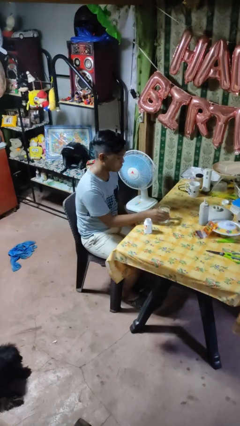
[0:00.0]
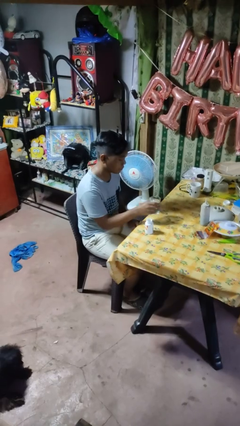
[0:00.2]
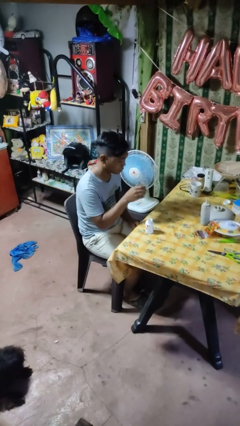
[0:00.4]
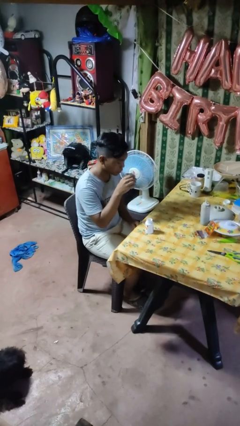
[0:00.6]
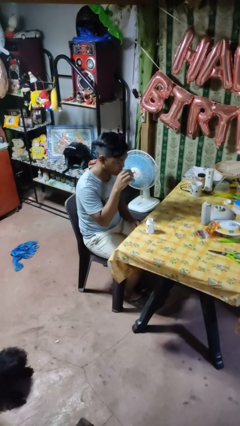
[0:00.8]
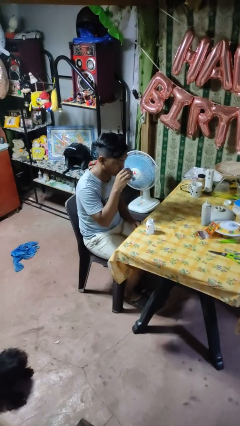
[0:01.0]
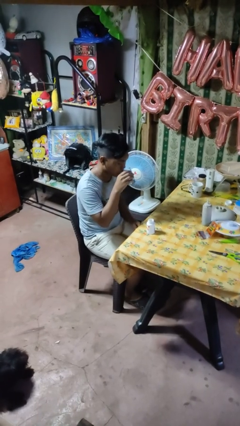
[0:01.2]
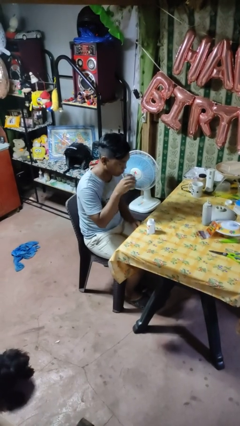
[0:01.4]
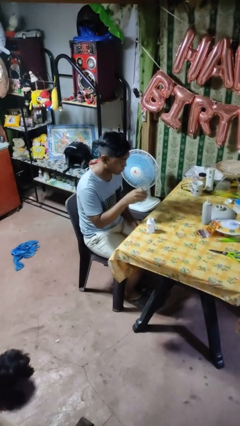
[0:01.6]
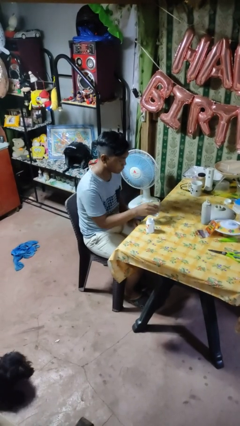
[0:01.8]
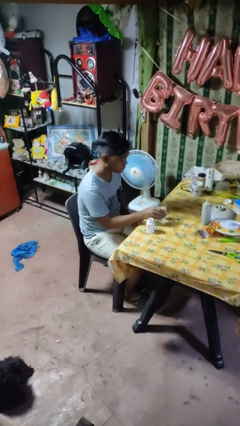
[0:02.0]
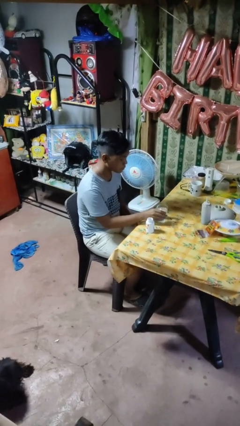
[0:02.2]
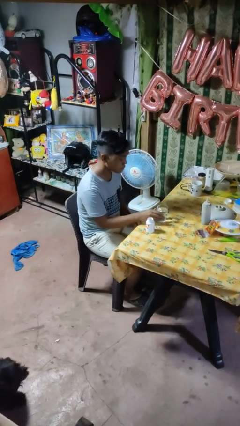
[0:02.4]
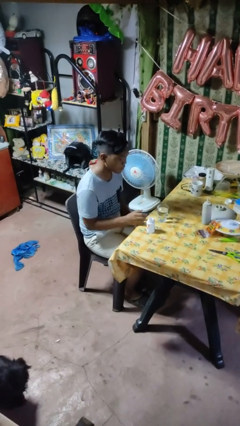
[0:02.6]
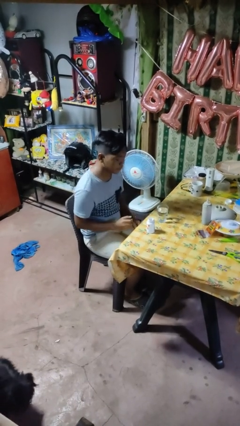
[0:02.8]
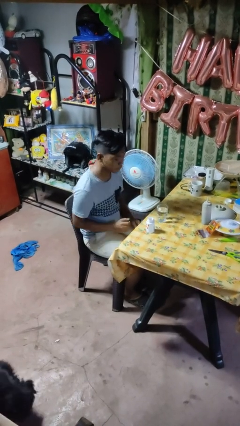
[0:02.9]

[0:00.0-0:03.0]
person drinks from cup

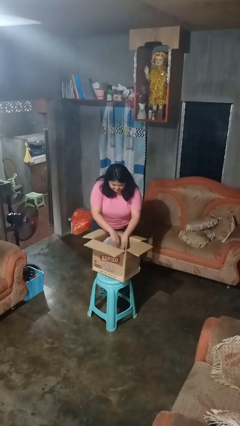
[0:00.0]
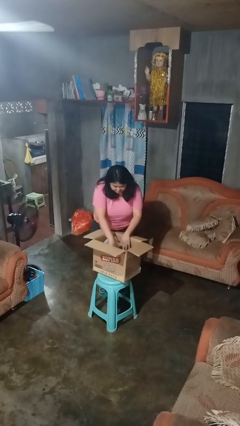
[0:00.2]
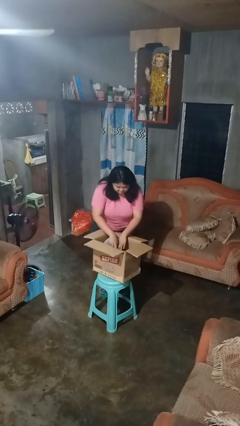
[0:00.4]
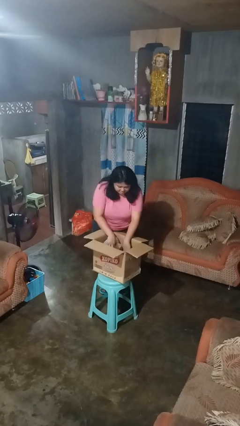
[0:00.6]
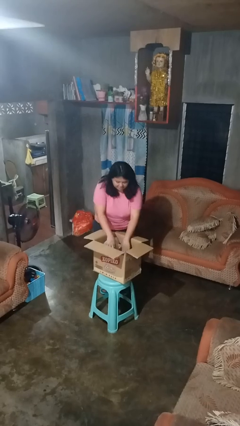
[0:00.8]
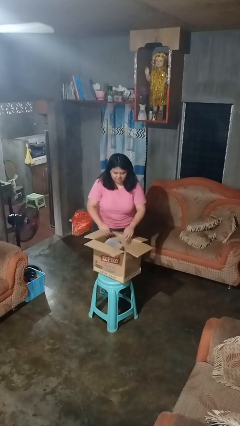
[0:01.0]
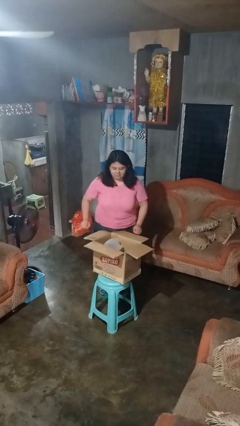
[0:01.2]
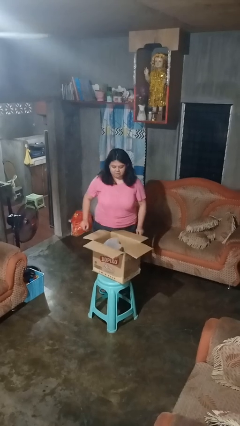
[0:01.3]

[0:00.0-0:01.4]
person searches in box

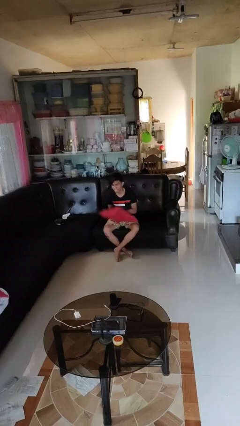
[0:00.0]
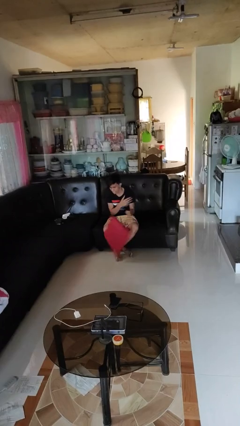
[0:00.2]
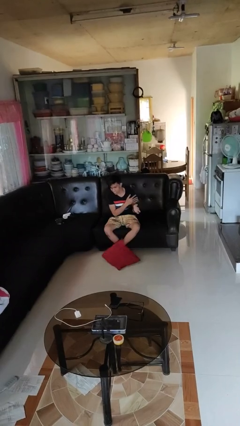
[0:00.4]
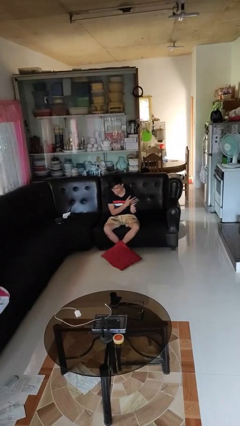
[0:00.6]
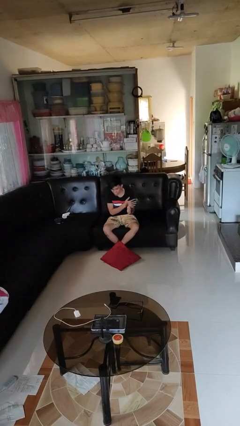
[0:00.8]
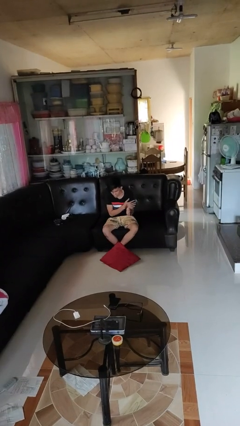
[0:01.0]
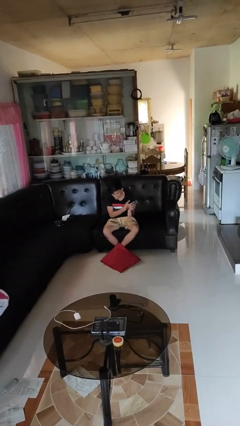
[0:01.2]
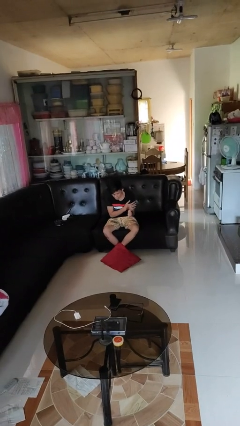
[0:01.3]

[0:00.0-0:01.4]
person drops object

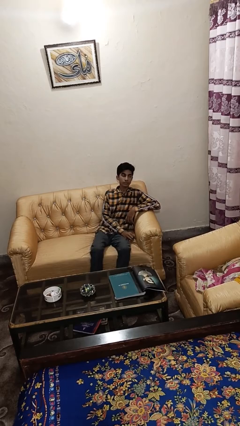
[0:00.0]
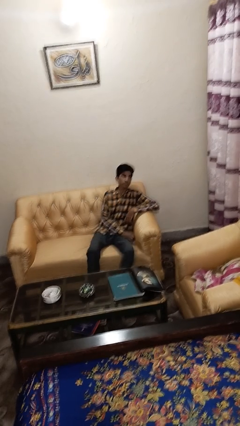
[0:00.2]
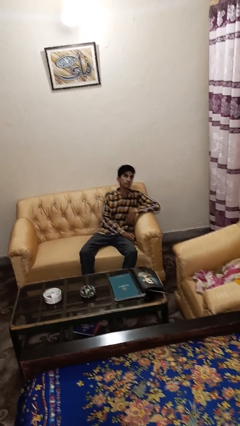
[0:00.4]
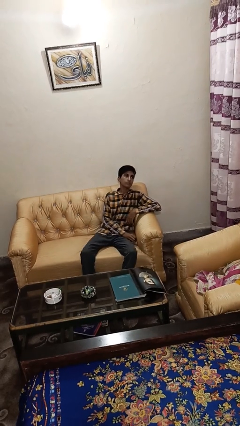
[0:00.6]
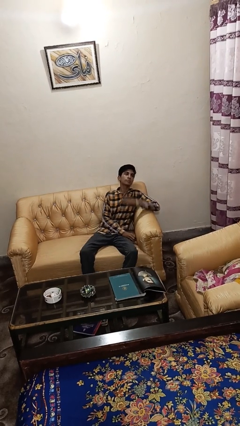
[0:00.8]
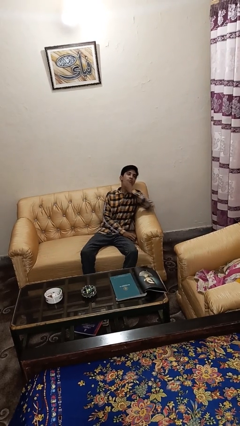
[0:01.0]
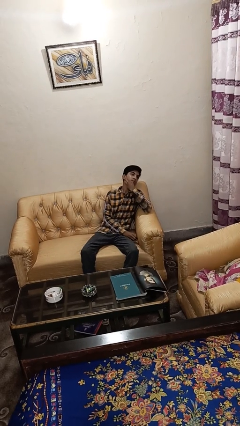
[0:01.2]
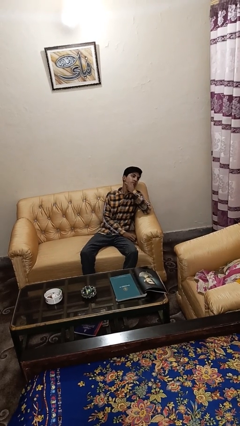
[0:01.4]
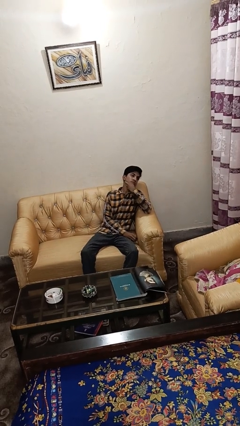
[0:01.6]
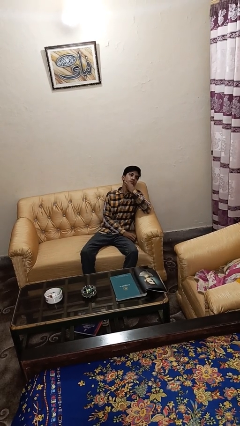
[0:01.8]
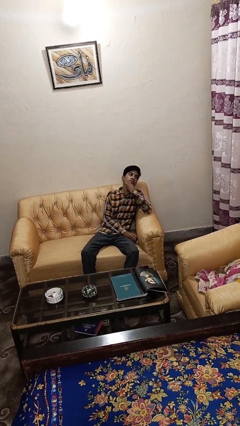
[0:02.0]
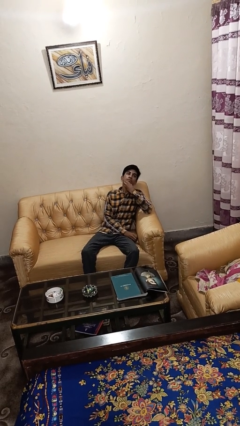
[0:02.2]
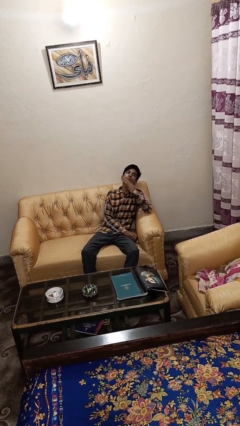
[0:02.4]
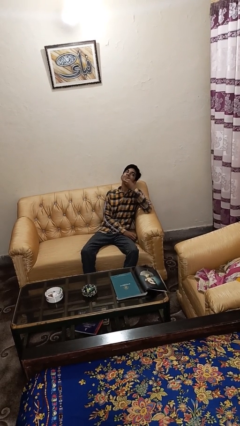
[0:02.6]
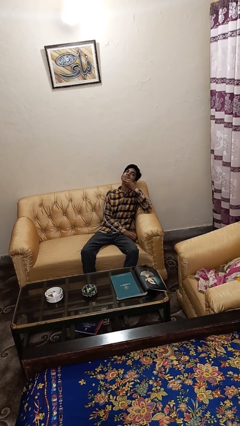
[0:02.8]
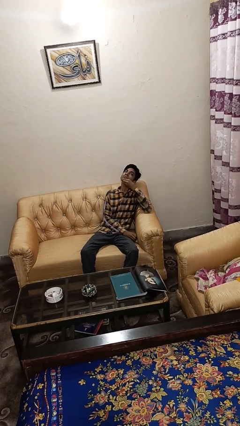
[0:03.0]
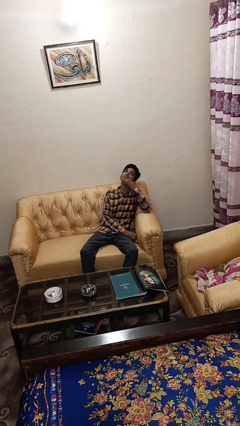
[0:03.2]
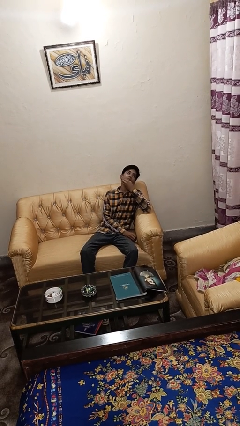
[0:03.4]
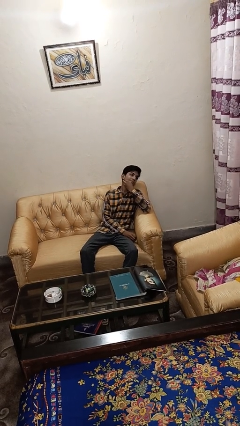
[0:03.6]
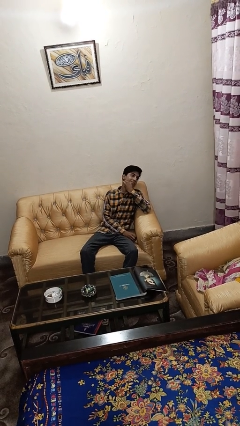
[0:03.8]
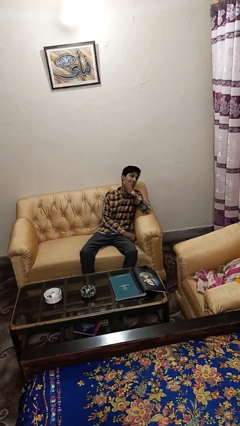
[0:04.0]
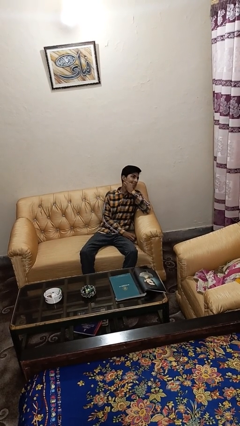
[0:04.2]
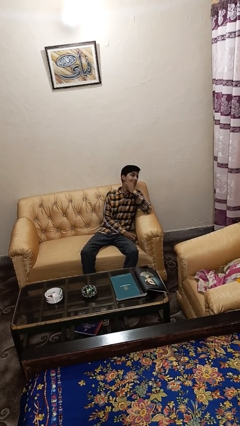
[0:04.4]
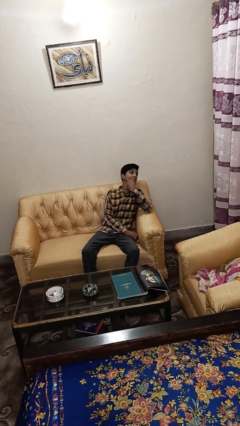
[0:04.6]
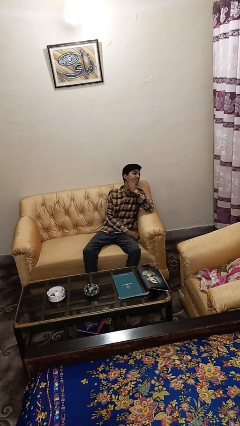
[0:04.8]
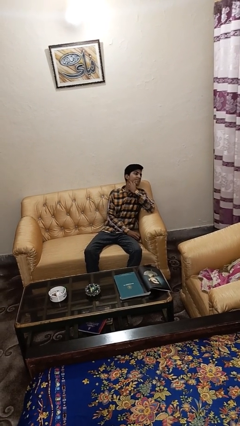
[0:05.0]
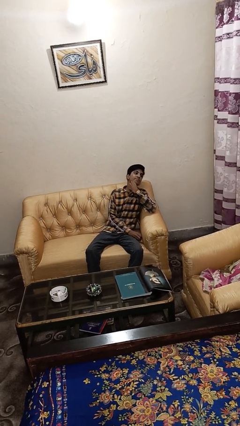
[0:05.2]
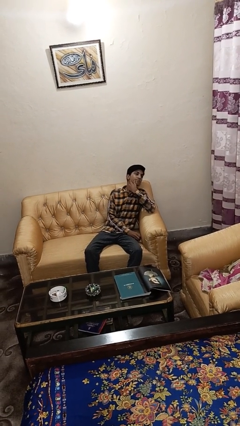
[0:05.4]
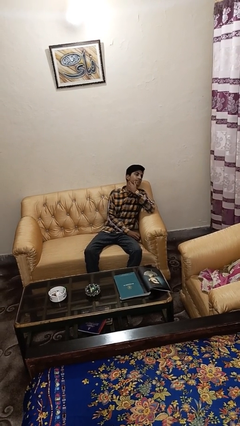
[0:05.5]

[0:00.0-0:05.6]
person strokes chin

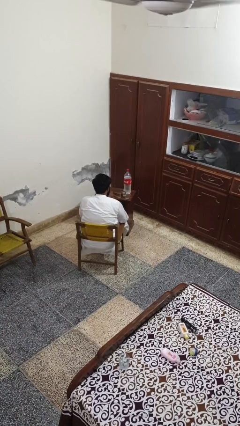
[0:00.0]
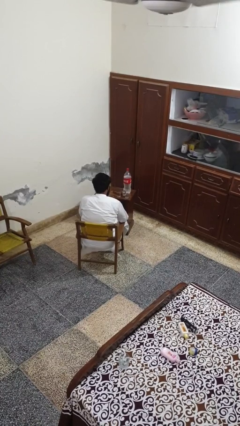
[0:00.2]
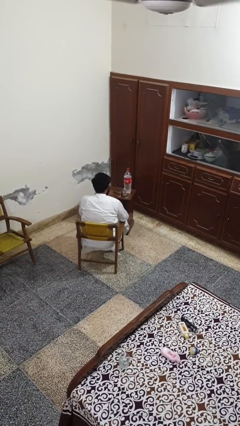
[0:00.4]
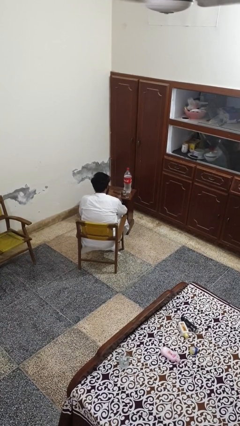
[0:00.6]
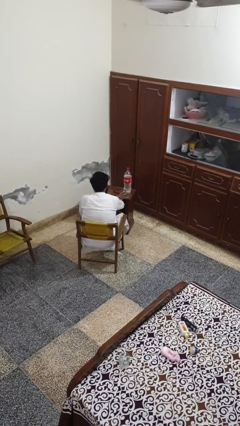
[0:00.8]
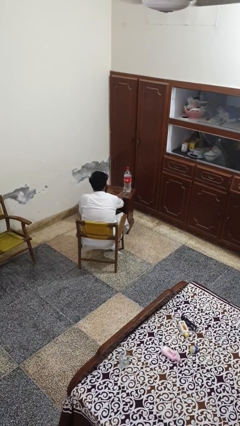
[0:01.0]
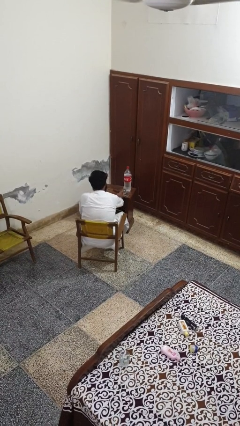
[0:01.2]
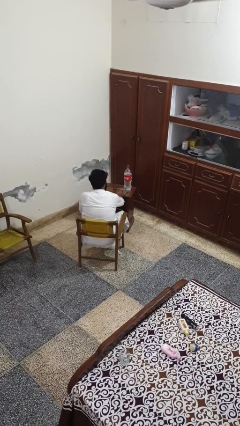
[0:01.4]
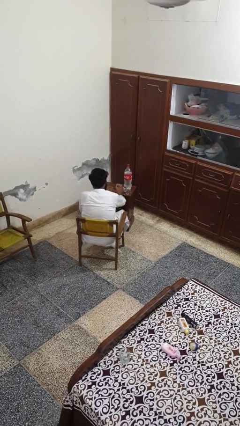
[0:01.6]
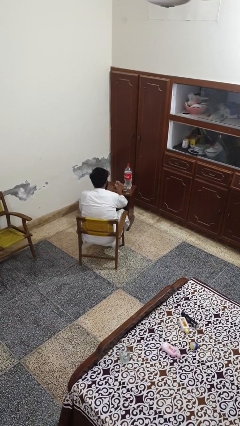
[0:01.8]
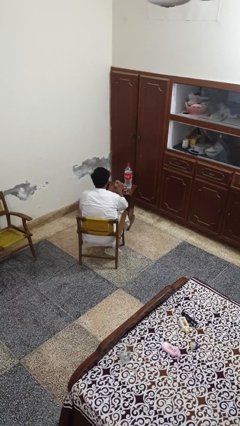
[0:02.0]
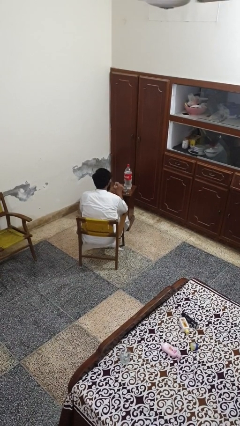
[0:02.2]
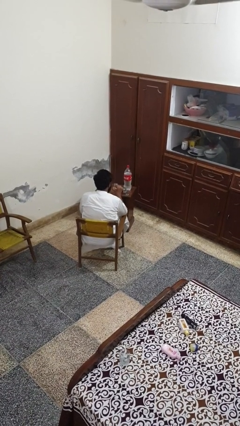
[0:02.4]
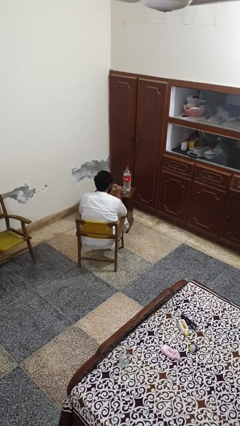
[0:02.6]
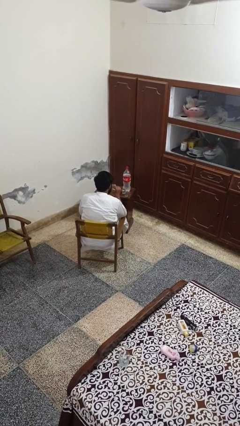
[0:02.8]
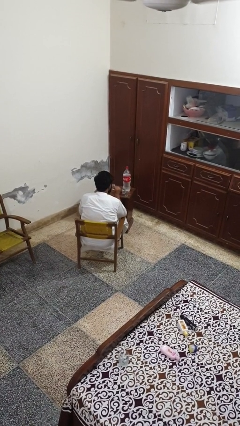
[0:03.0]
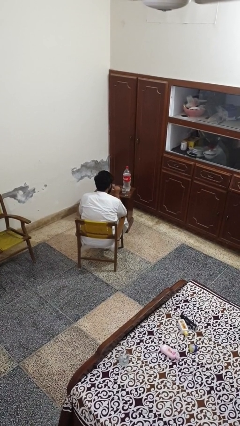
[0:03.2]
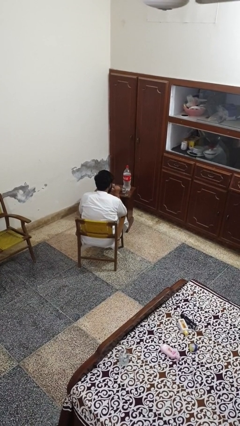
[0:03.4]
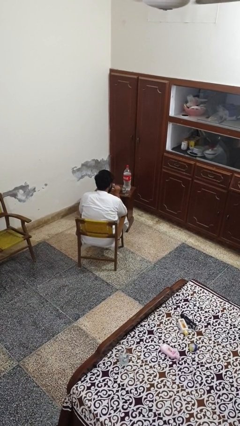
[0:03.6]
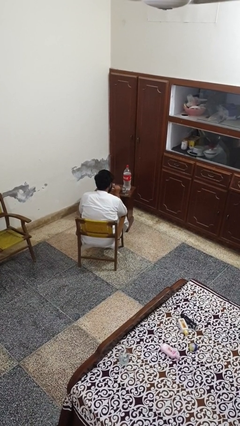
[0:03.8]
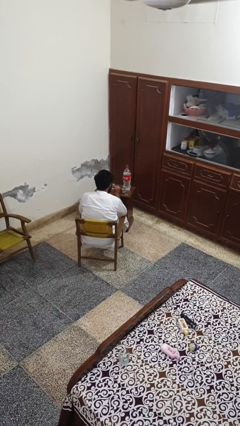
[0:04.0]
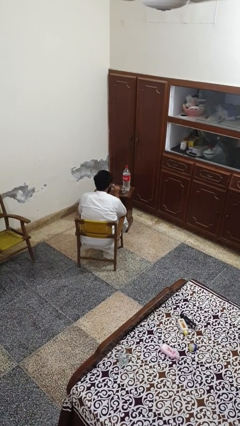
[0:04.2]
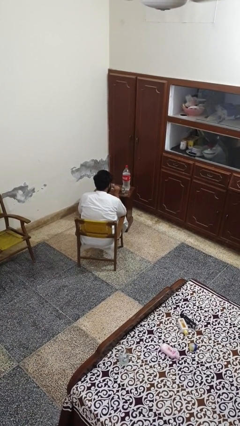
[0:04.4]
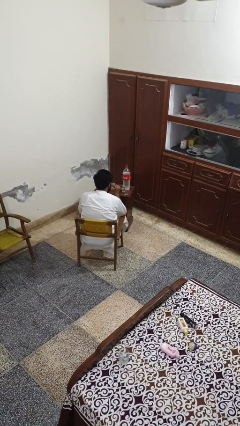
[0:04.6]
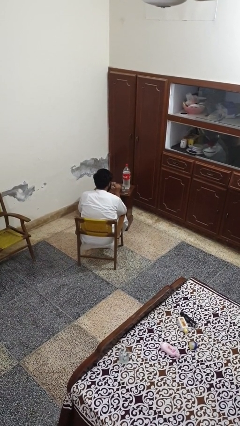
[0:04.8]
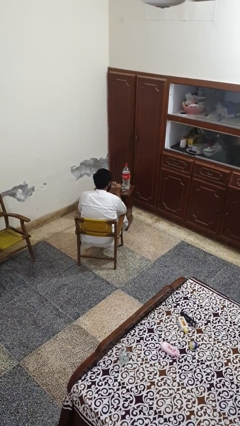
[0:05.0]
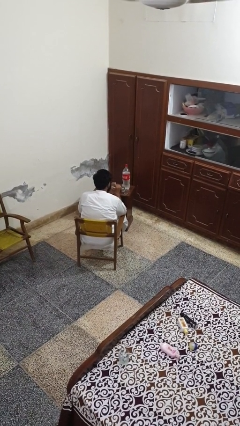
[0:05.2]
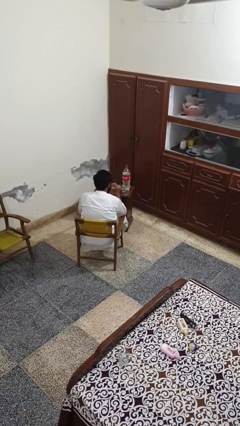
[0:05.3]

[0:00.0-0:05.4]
person picks up object from table

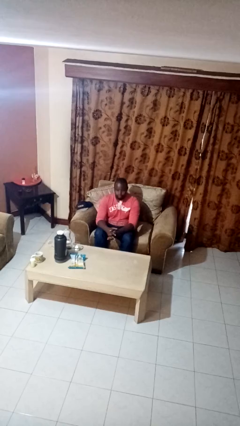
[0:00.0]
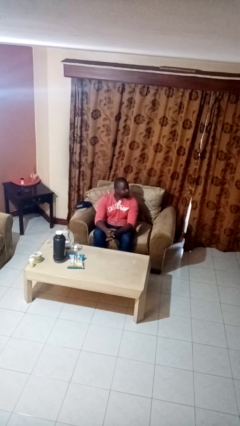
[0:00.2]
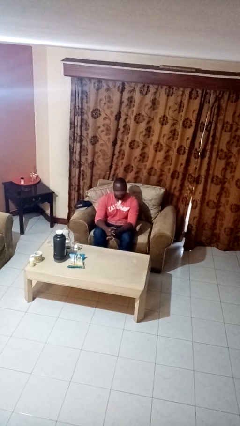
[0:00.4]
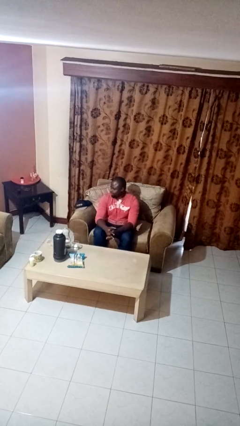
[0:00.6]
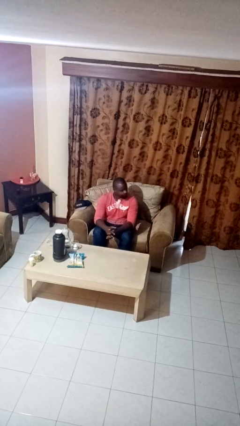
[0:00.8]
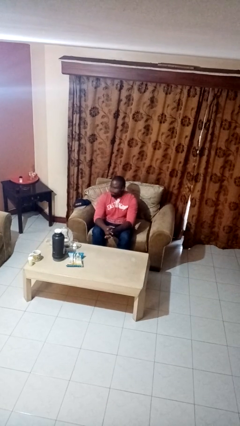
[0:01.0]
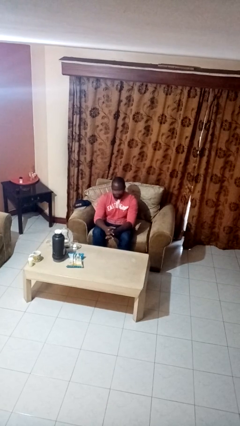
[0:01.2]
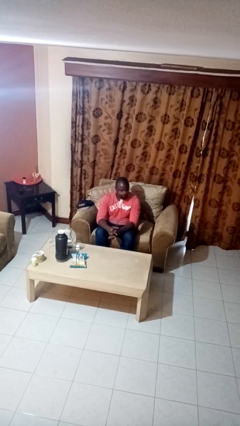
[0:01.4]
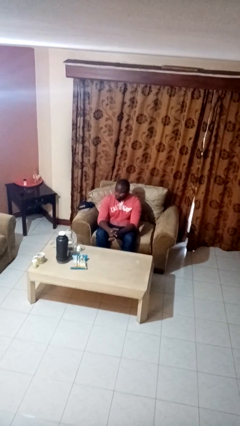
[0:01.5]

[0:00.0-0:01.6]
person shakes head
